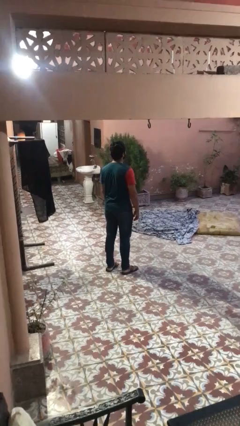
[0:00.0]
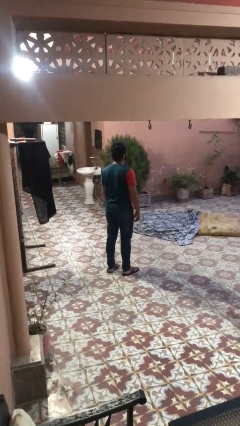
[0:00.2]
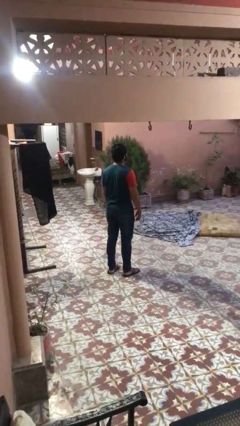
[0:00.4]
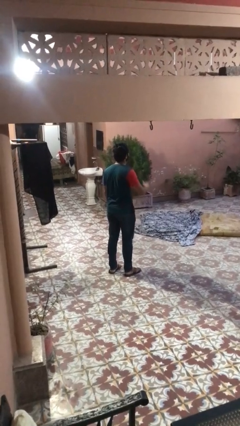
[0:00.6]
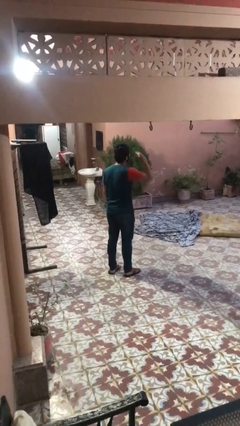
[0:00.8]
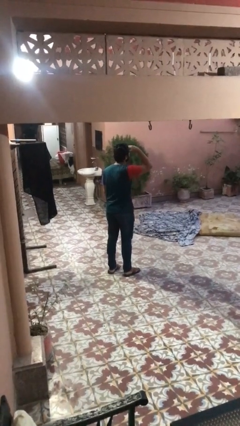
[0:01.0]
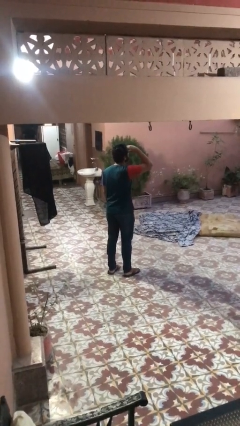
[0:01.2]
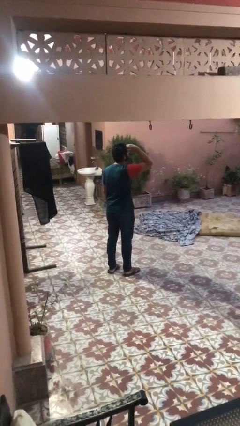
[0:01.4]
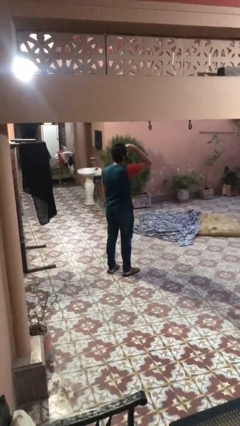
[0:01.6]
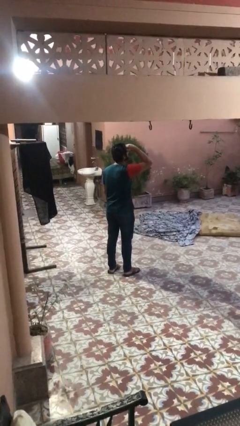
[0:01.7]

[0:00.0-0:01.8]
person shades eyes

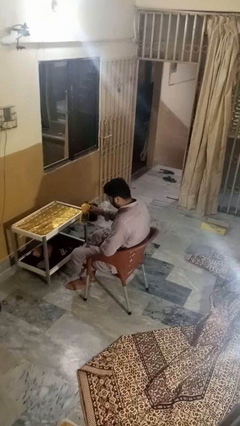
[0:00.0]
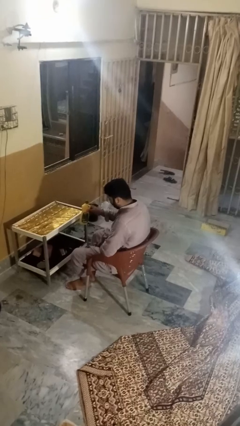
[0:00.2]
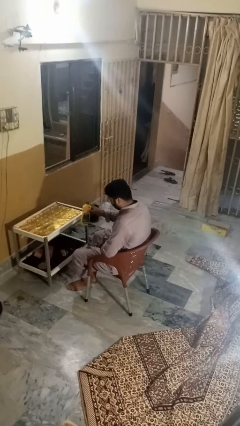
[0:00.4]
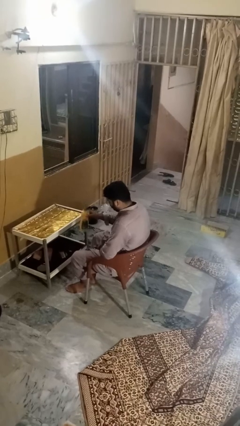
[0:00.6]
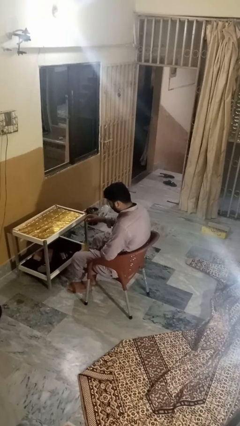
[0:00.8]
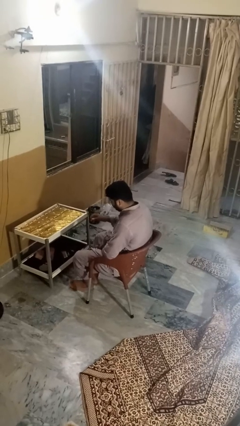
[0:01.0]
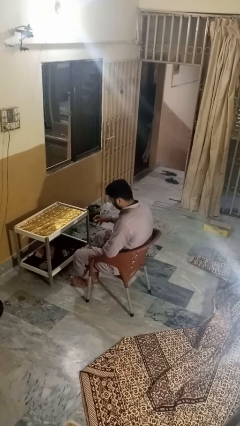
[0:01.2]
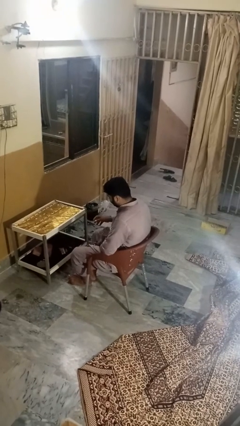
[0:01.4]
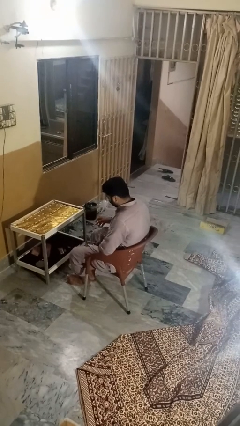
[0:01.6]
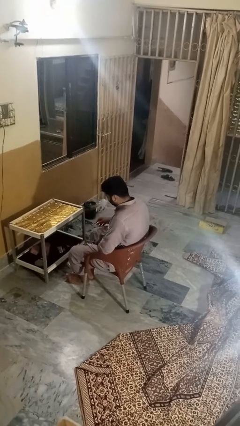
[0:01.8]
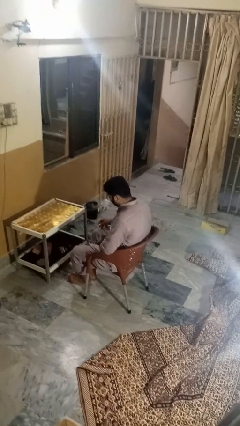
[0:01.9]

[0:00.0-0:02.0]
person throws object to ground

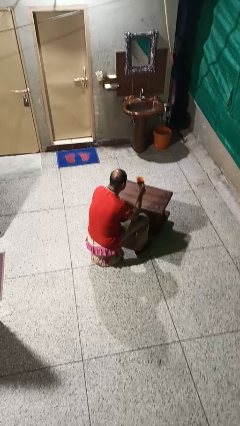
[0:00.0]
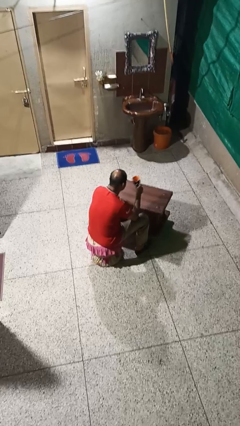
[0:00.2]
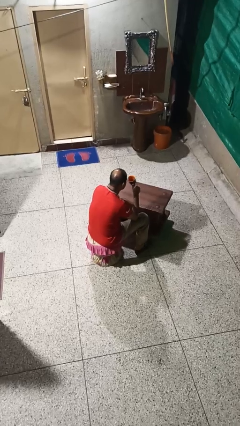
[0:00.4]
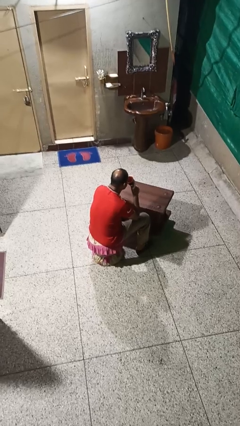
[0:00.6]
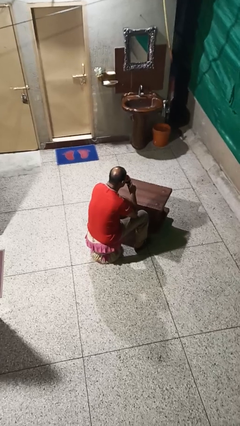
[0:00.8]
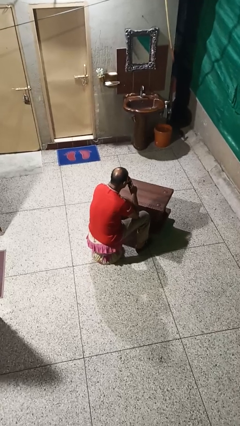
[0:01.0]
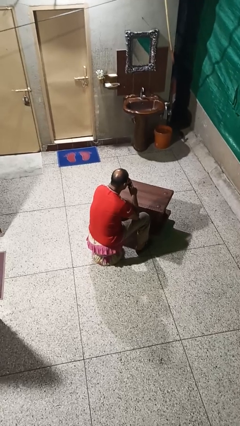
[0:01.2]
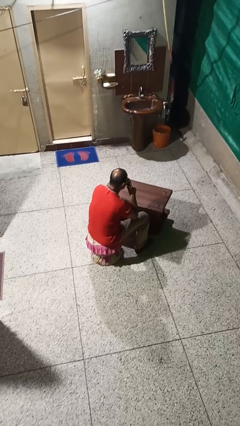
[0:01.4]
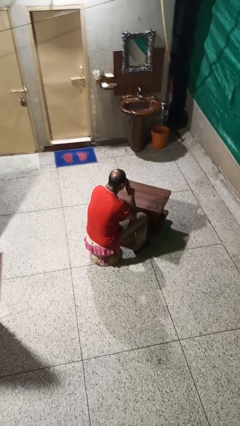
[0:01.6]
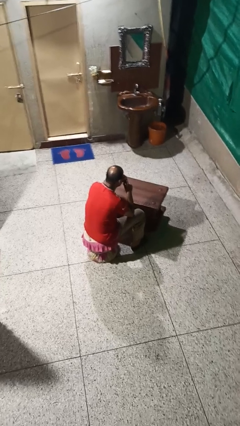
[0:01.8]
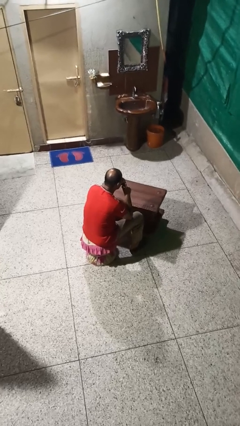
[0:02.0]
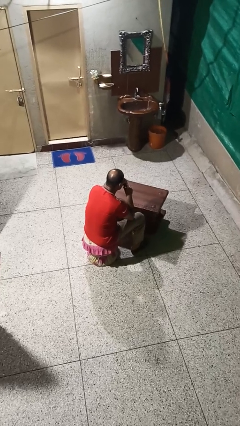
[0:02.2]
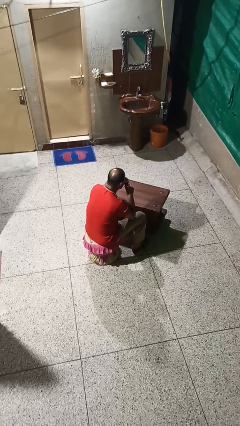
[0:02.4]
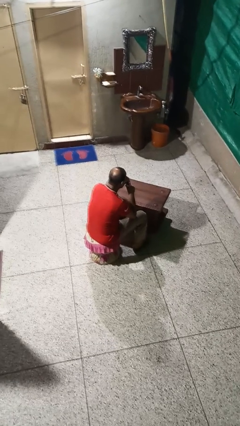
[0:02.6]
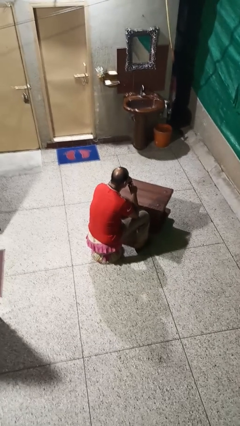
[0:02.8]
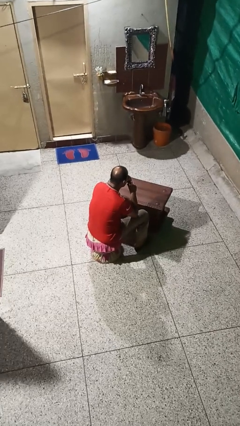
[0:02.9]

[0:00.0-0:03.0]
person drinks from mug

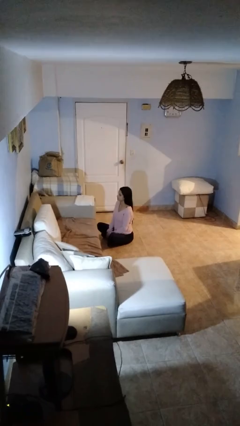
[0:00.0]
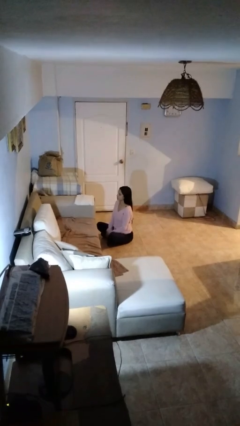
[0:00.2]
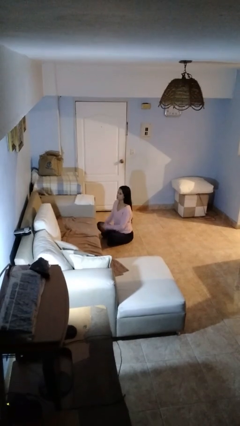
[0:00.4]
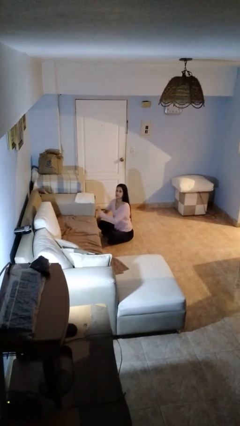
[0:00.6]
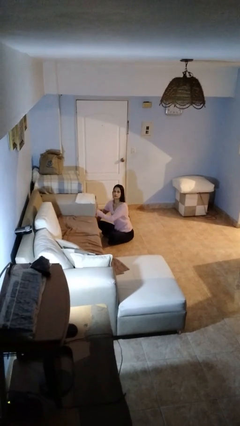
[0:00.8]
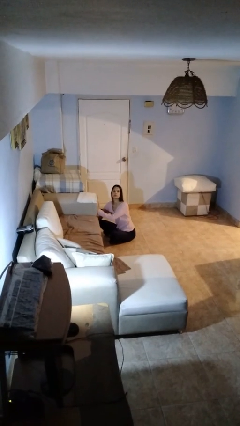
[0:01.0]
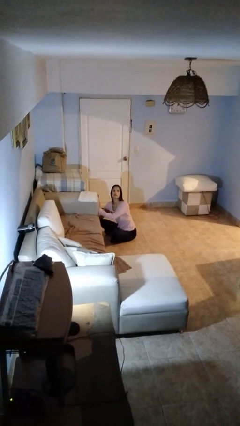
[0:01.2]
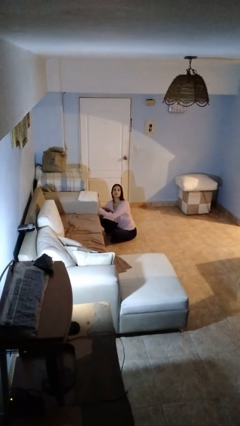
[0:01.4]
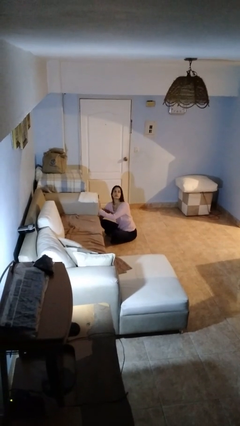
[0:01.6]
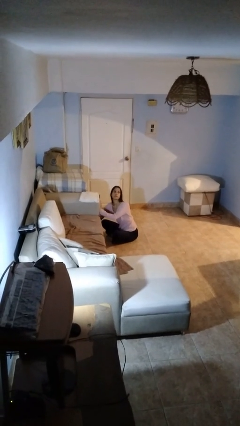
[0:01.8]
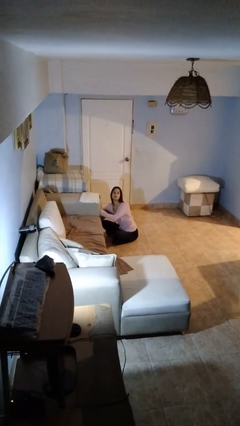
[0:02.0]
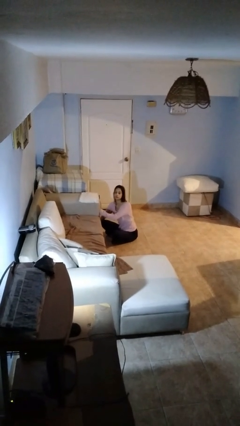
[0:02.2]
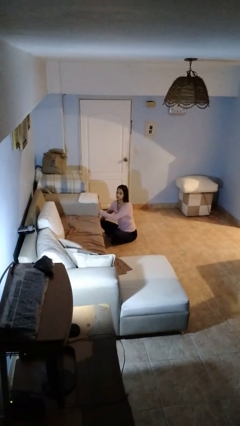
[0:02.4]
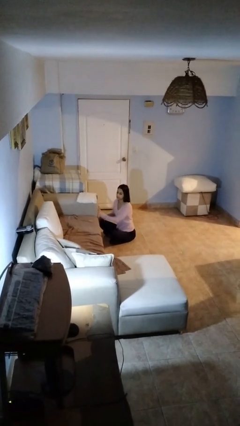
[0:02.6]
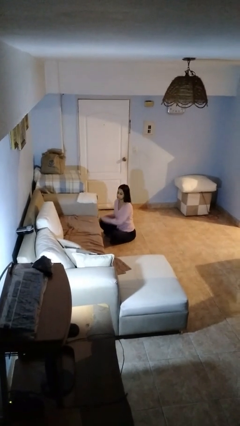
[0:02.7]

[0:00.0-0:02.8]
person searches under couch

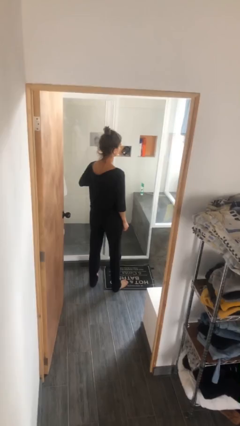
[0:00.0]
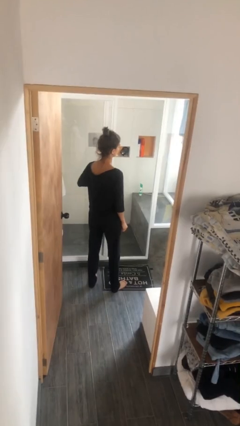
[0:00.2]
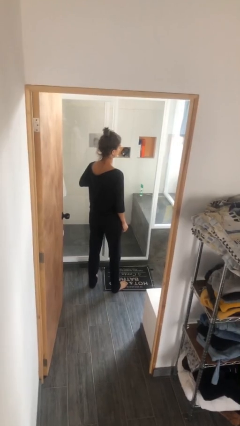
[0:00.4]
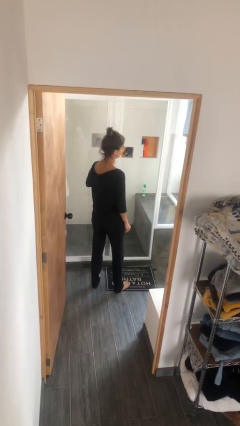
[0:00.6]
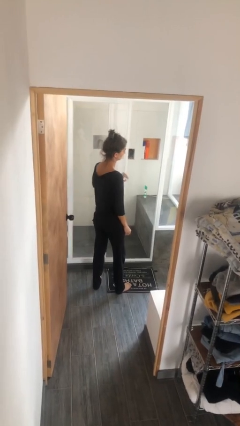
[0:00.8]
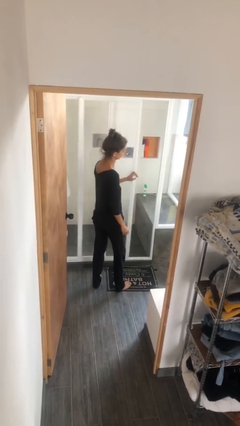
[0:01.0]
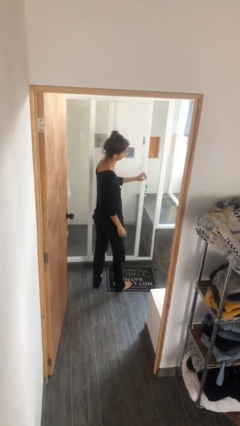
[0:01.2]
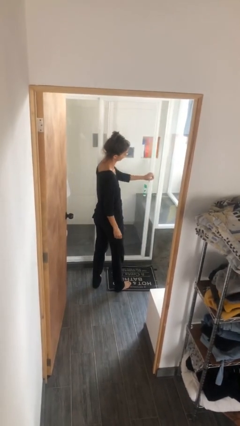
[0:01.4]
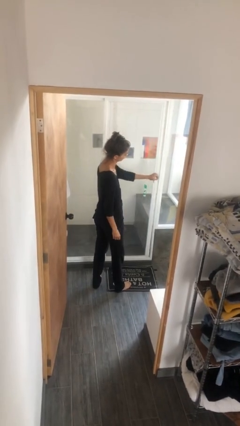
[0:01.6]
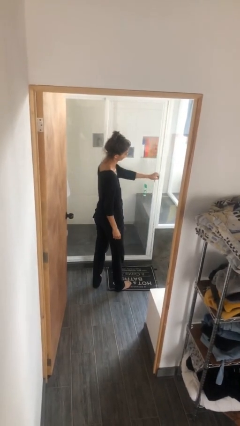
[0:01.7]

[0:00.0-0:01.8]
person closes sliding door

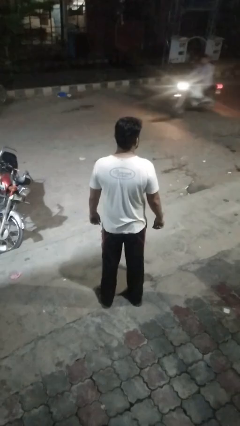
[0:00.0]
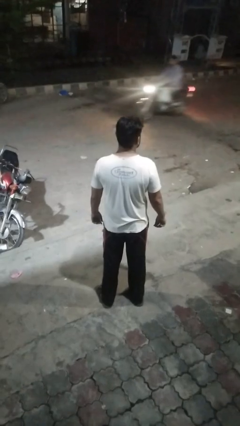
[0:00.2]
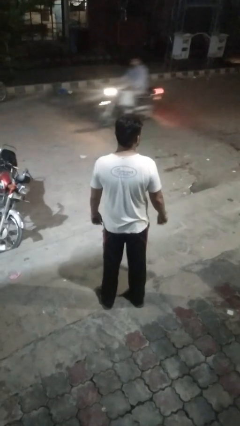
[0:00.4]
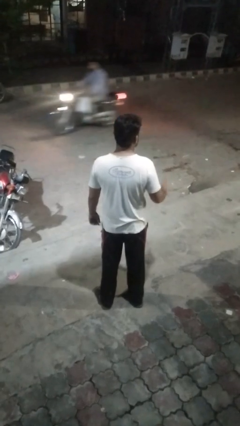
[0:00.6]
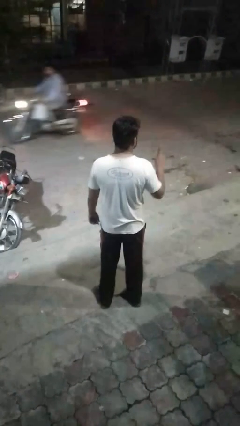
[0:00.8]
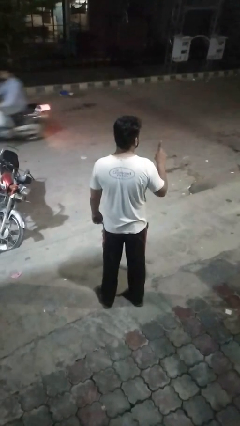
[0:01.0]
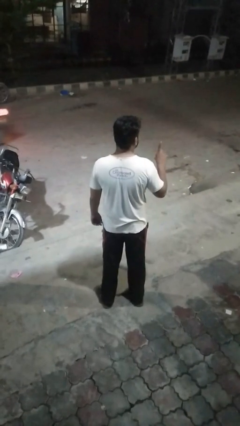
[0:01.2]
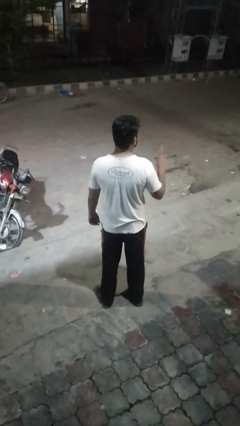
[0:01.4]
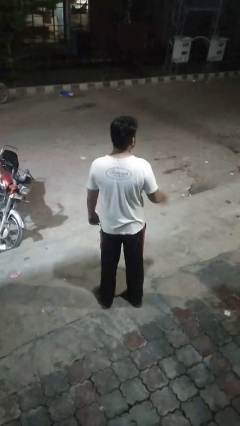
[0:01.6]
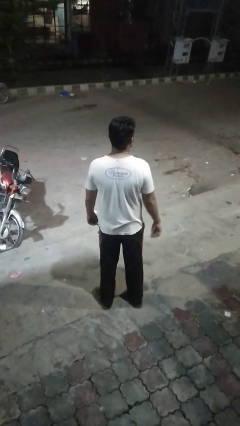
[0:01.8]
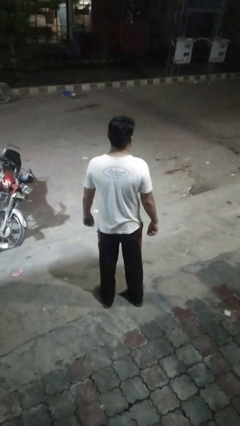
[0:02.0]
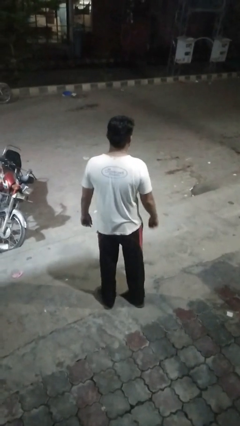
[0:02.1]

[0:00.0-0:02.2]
person gestures number one

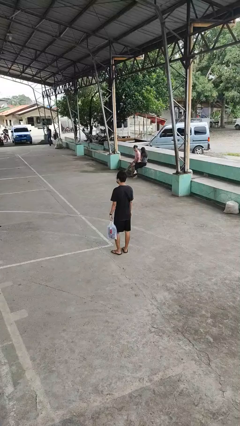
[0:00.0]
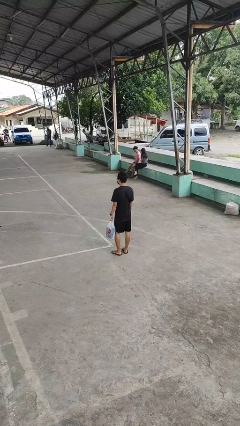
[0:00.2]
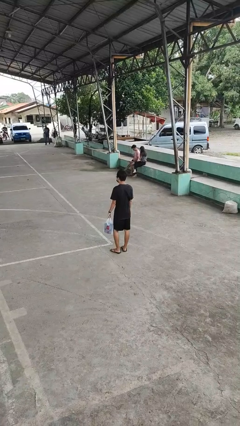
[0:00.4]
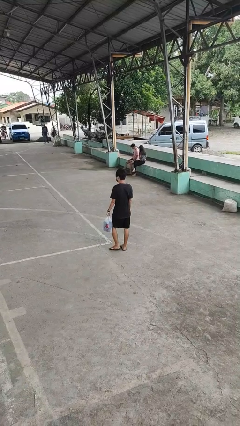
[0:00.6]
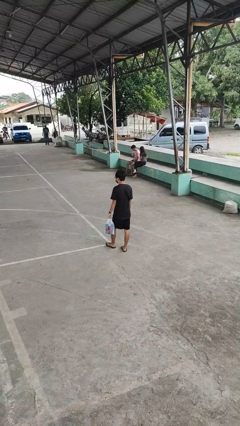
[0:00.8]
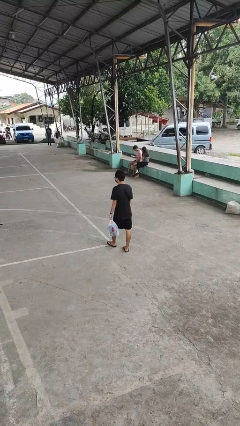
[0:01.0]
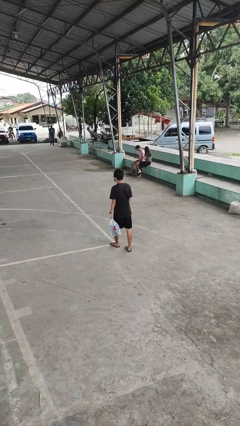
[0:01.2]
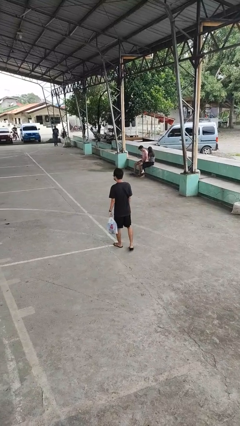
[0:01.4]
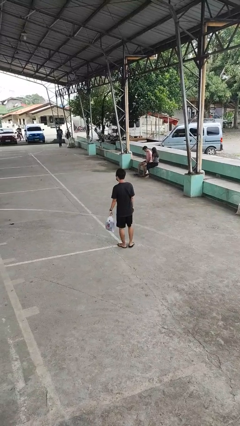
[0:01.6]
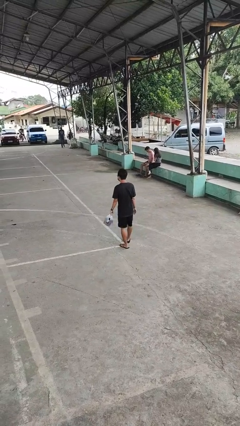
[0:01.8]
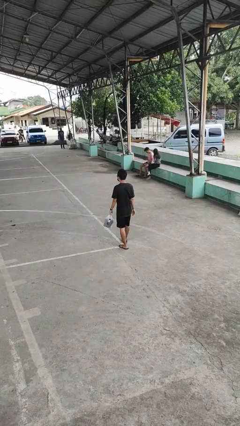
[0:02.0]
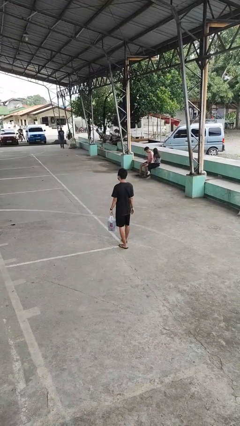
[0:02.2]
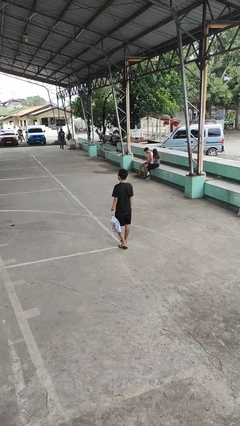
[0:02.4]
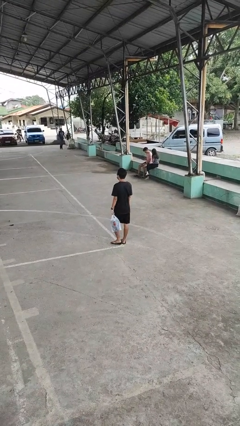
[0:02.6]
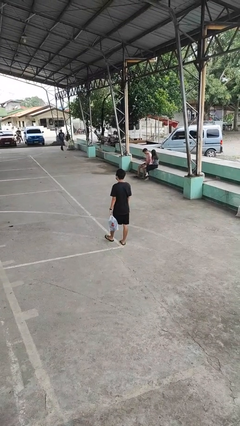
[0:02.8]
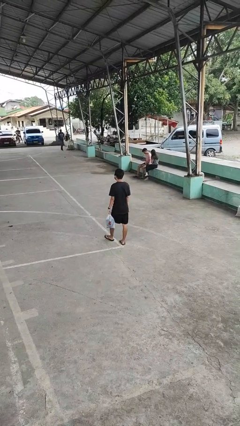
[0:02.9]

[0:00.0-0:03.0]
person carries groceries

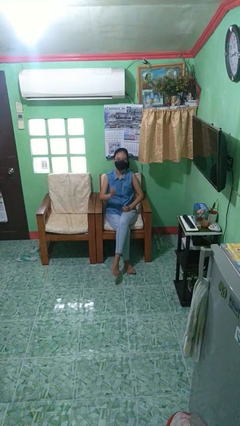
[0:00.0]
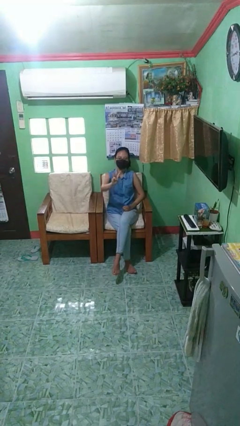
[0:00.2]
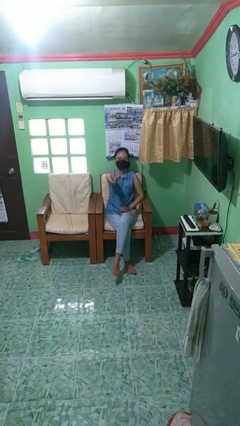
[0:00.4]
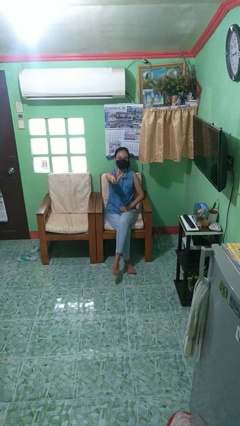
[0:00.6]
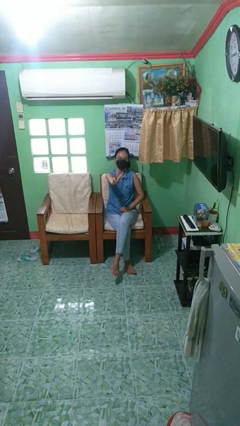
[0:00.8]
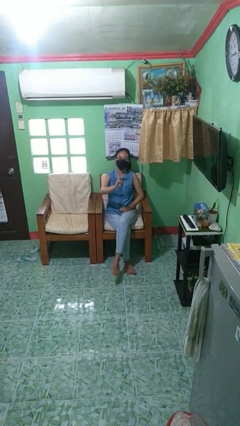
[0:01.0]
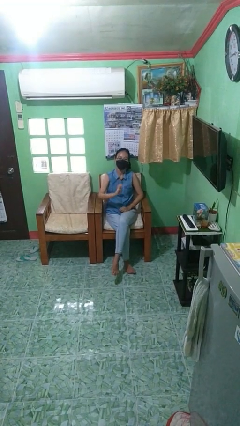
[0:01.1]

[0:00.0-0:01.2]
person gestures number three
